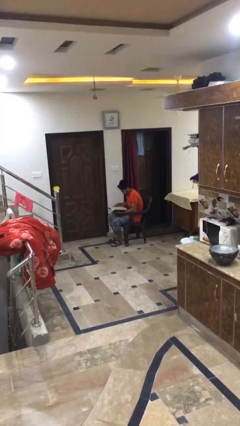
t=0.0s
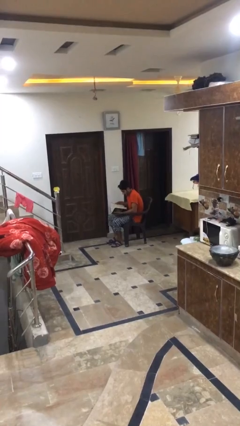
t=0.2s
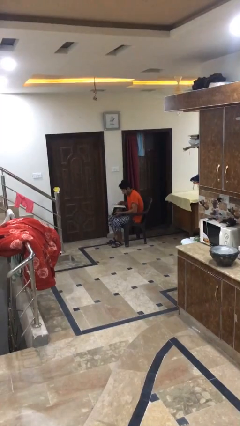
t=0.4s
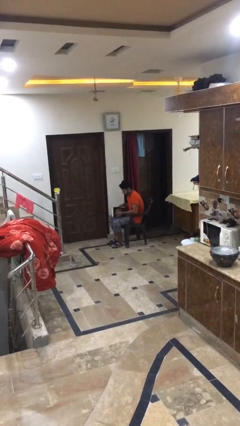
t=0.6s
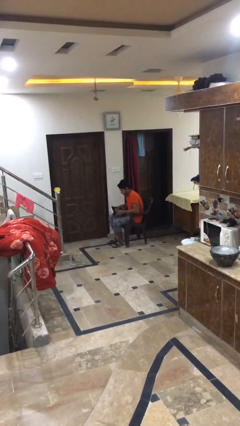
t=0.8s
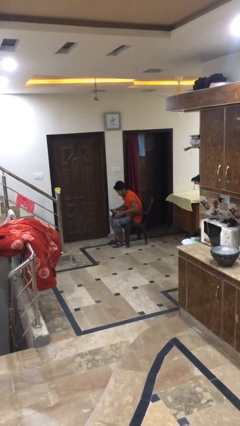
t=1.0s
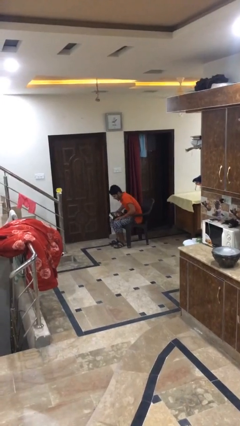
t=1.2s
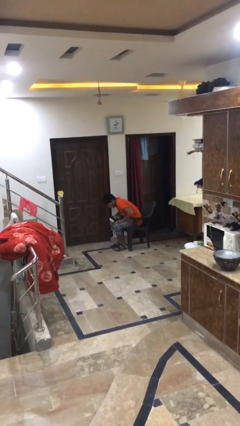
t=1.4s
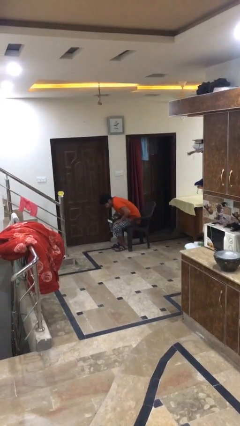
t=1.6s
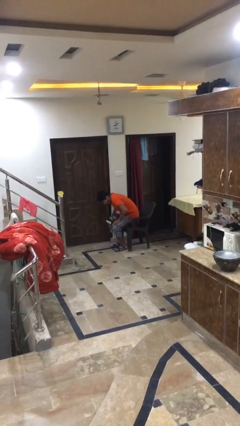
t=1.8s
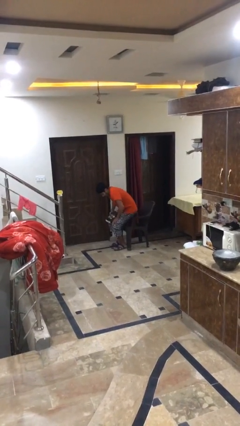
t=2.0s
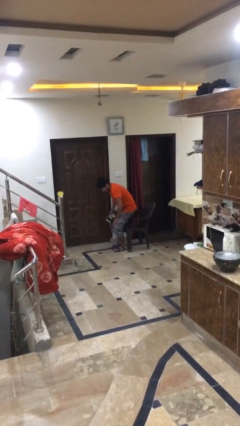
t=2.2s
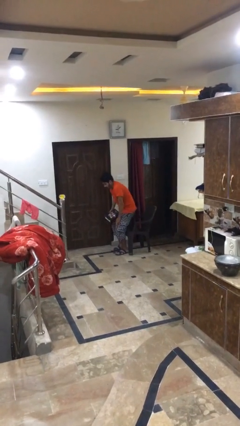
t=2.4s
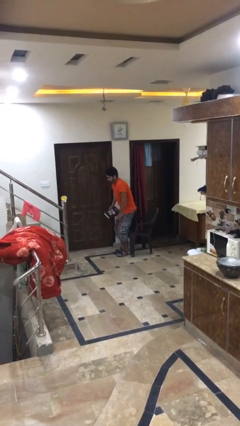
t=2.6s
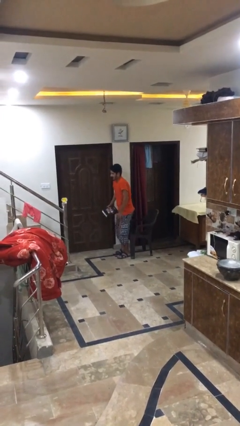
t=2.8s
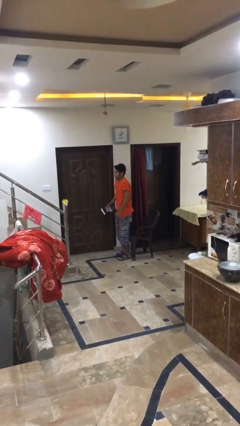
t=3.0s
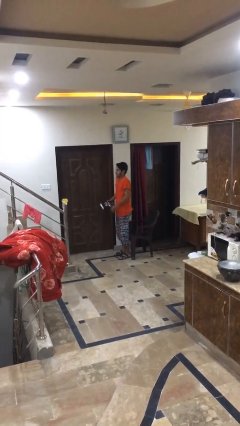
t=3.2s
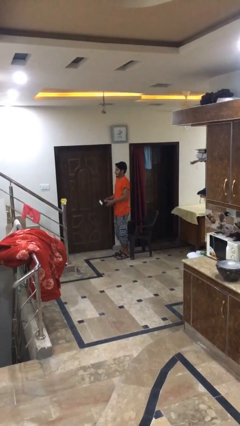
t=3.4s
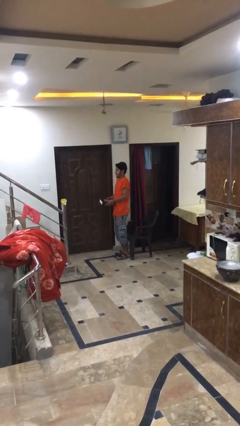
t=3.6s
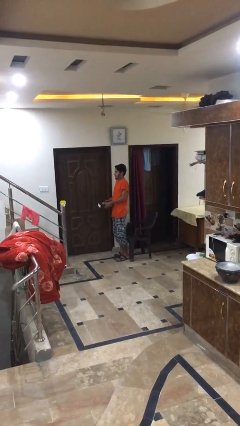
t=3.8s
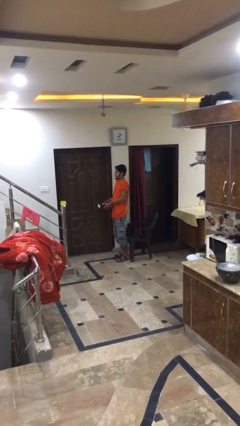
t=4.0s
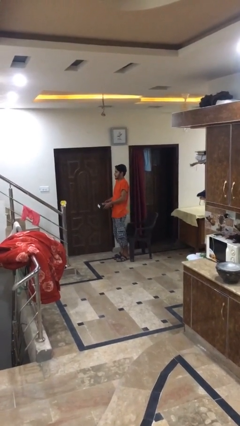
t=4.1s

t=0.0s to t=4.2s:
person stands up

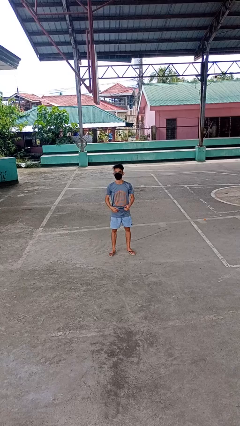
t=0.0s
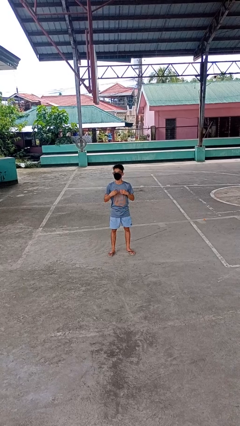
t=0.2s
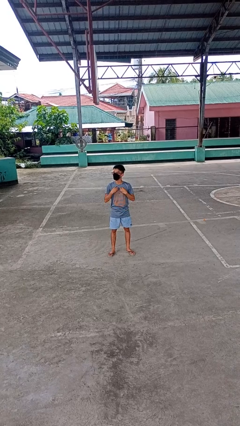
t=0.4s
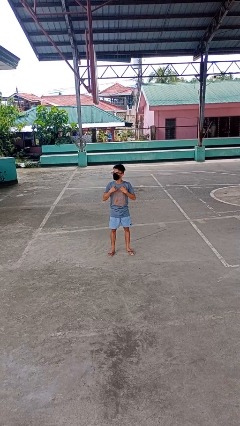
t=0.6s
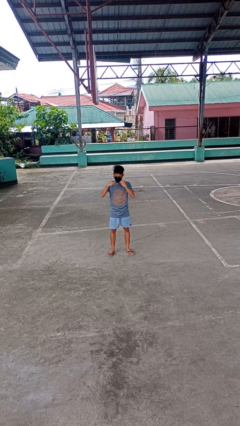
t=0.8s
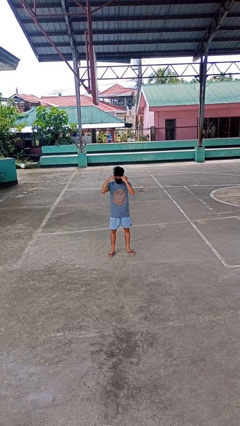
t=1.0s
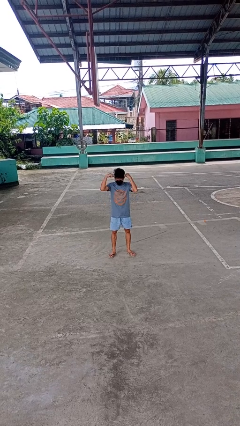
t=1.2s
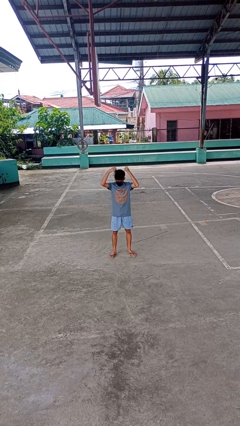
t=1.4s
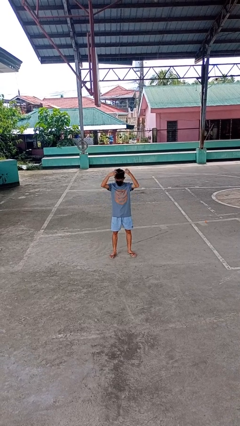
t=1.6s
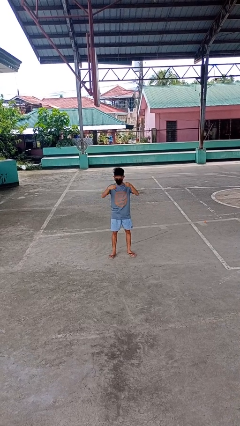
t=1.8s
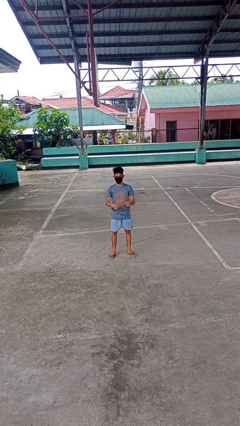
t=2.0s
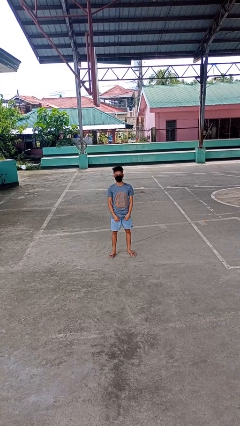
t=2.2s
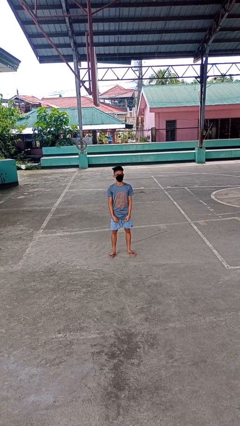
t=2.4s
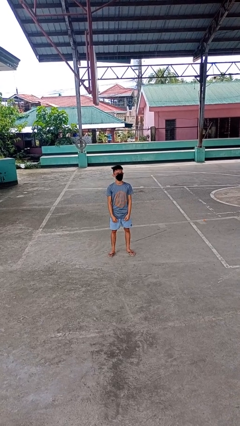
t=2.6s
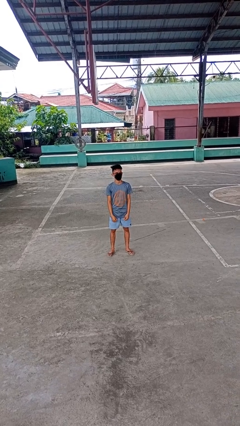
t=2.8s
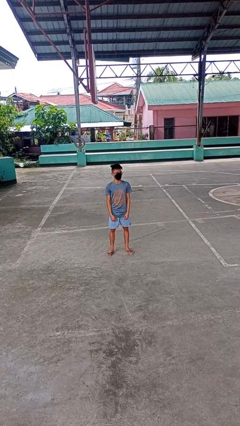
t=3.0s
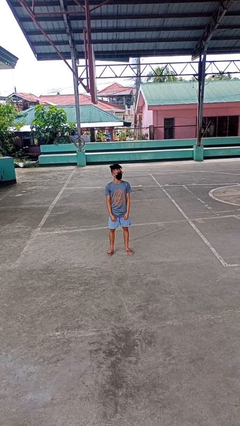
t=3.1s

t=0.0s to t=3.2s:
person takes off necklace

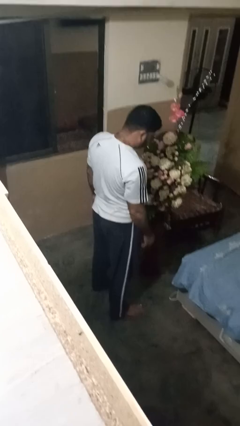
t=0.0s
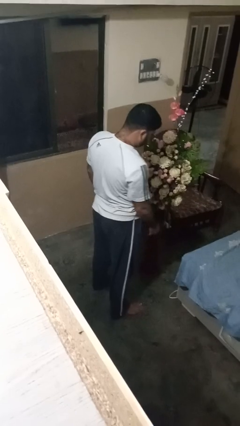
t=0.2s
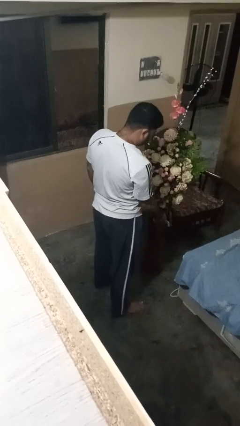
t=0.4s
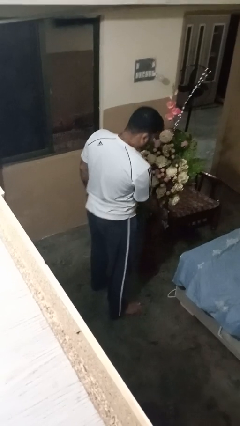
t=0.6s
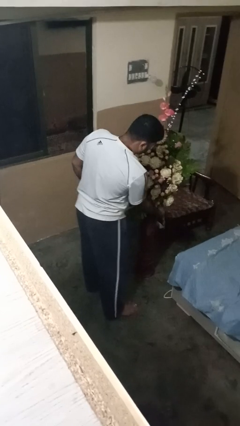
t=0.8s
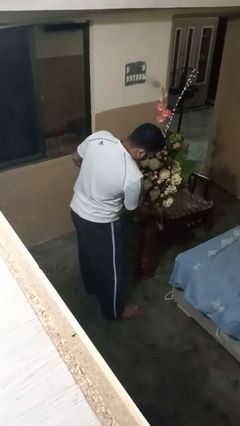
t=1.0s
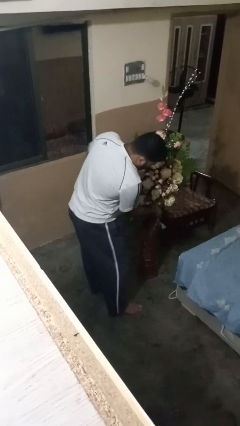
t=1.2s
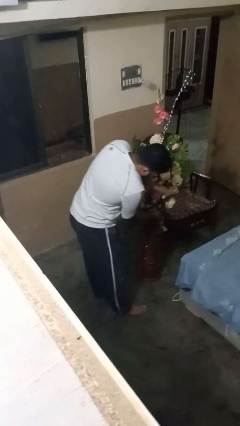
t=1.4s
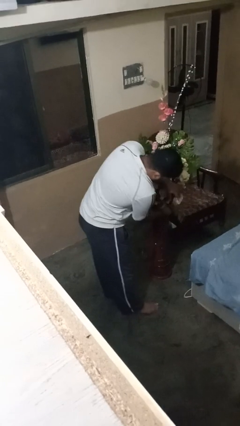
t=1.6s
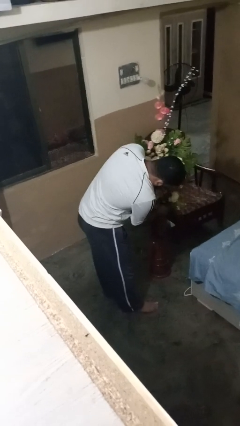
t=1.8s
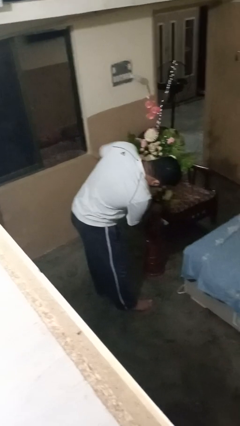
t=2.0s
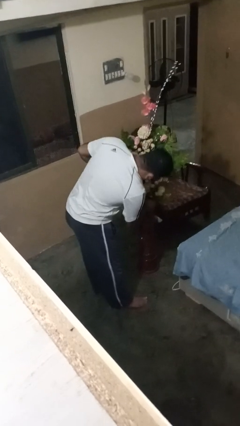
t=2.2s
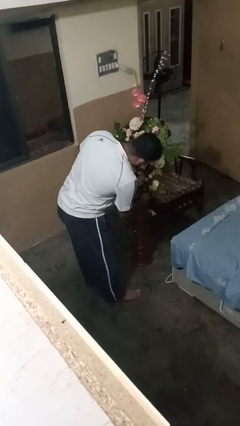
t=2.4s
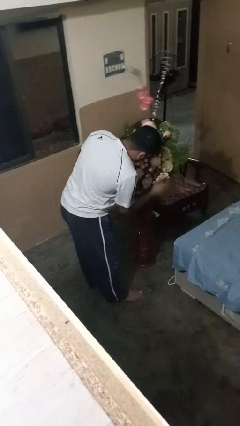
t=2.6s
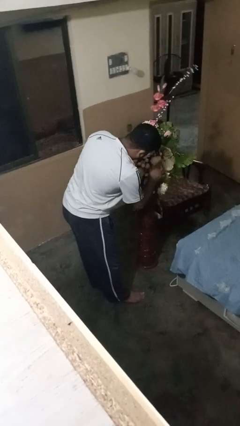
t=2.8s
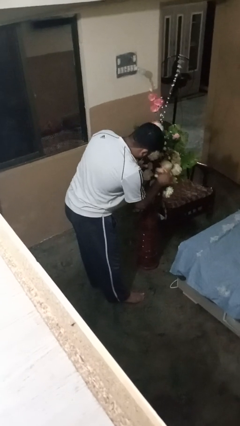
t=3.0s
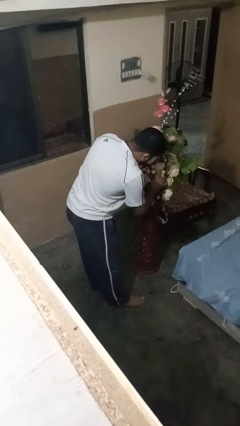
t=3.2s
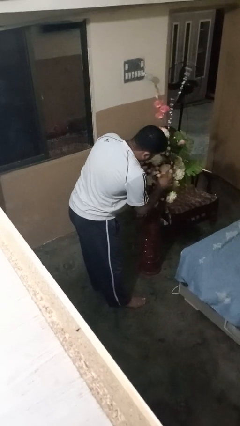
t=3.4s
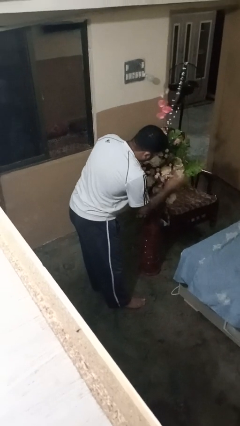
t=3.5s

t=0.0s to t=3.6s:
person arranges flowers in vase

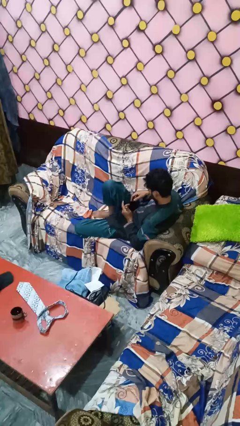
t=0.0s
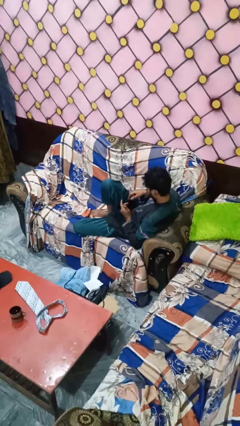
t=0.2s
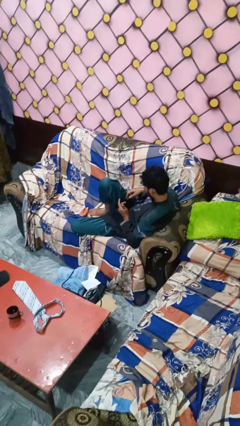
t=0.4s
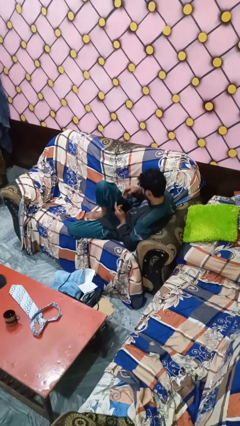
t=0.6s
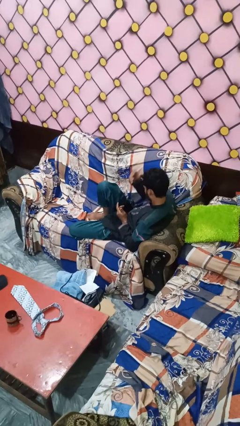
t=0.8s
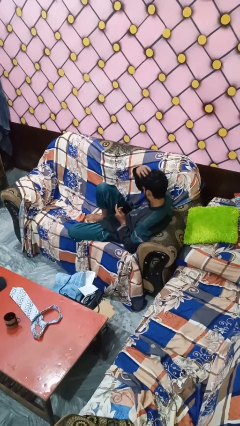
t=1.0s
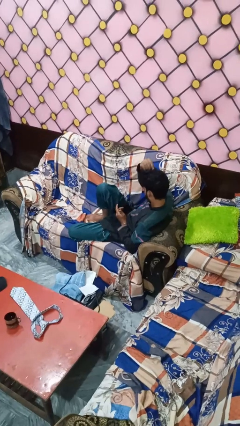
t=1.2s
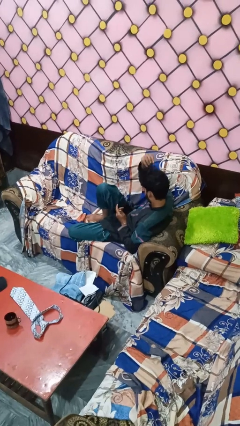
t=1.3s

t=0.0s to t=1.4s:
person strokes hair

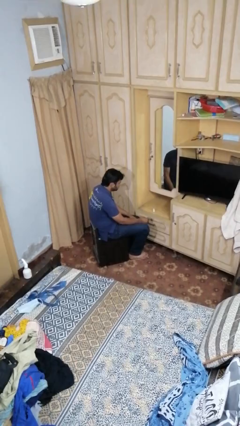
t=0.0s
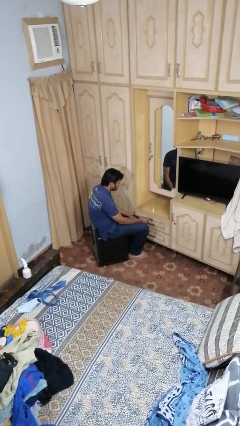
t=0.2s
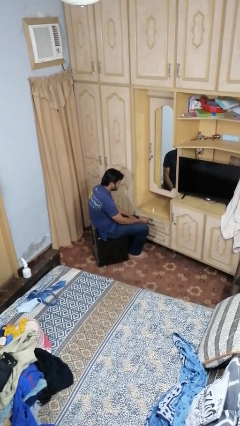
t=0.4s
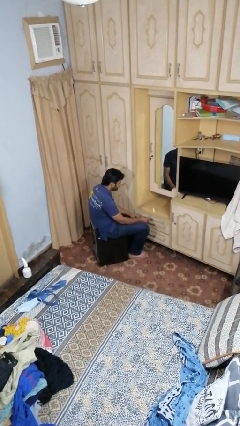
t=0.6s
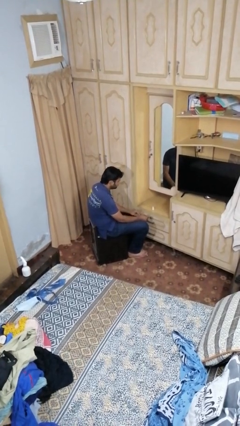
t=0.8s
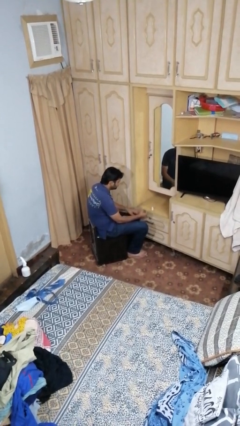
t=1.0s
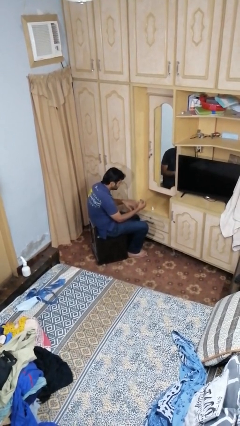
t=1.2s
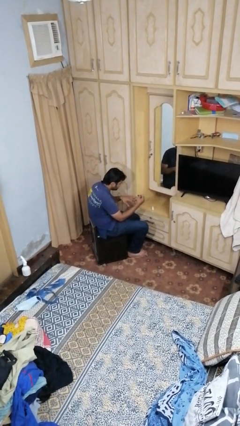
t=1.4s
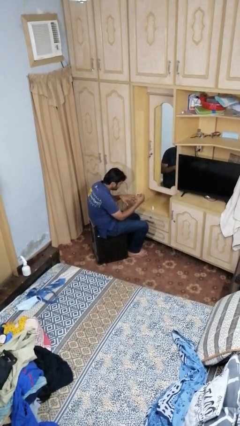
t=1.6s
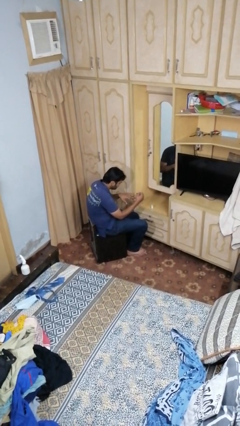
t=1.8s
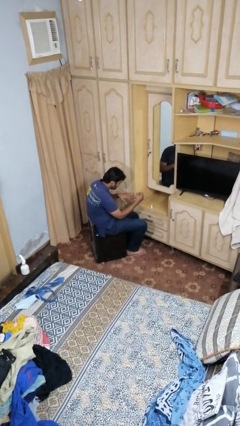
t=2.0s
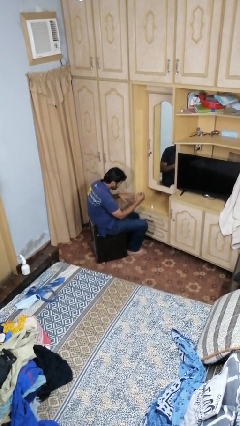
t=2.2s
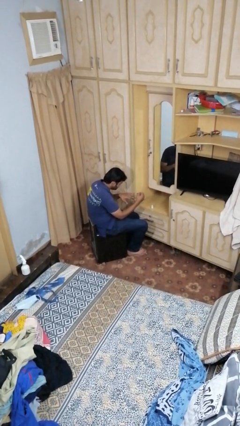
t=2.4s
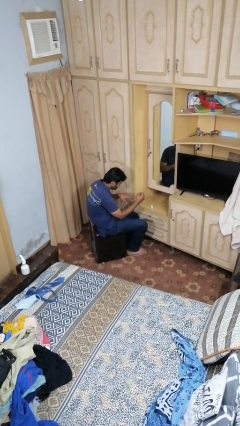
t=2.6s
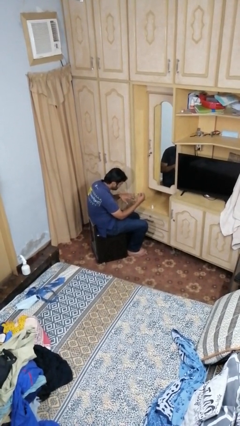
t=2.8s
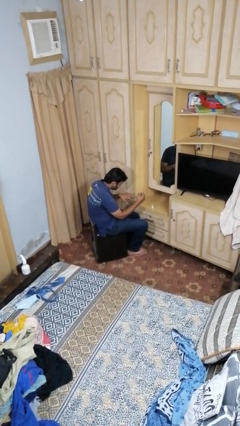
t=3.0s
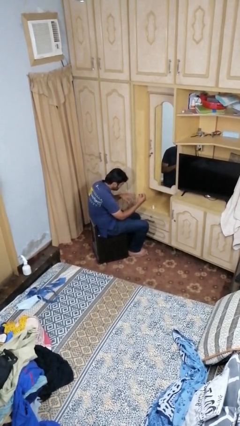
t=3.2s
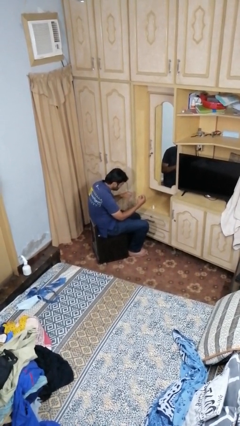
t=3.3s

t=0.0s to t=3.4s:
person paints fingernails

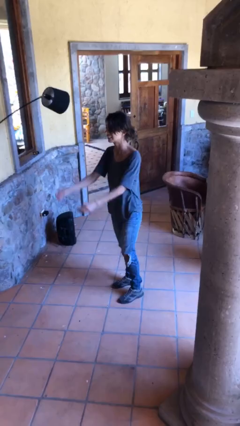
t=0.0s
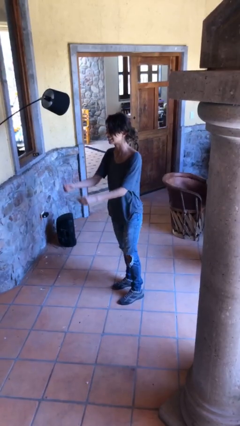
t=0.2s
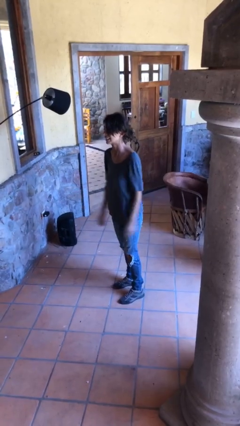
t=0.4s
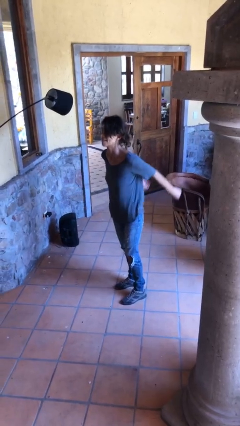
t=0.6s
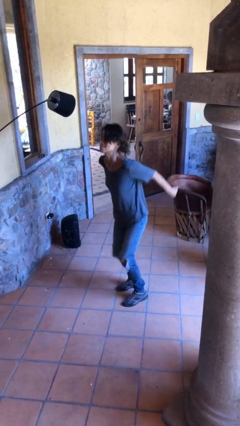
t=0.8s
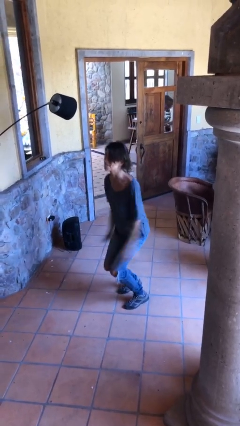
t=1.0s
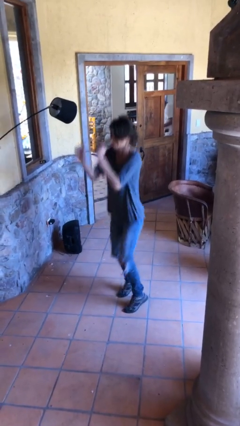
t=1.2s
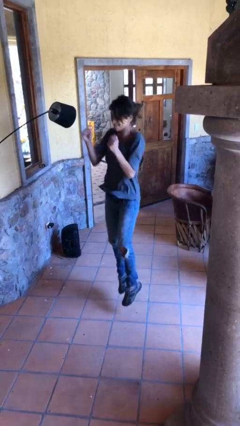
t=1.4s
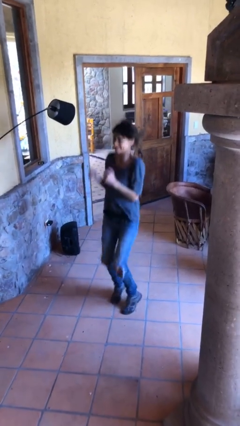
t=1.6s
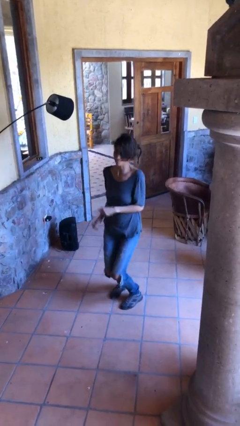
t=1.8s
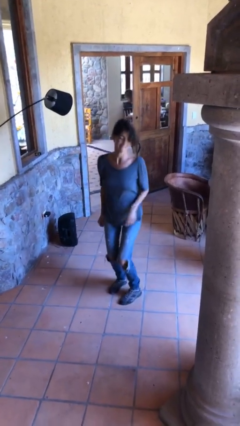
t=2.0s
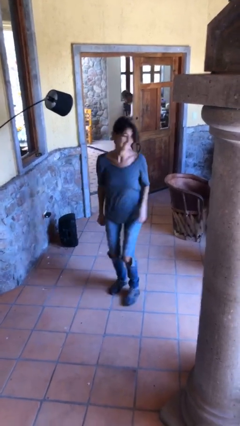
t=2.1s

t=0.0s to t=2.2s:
person jumps
